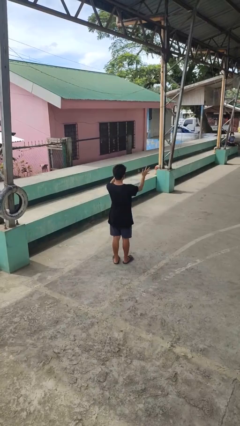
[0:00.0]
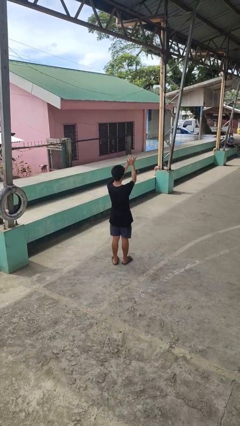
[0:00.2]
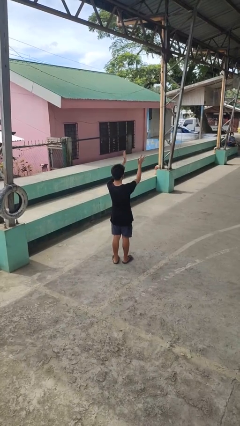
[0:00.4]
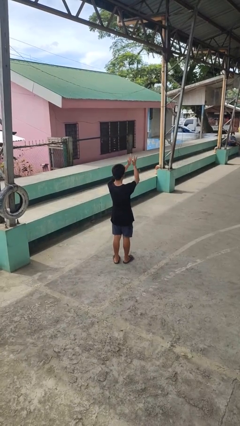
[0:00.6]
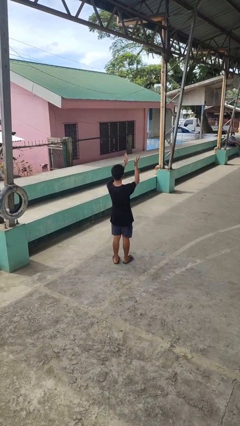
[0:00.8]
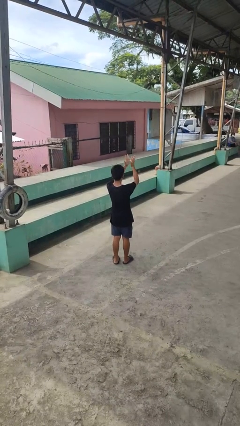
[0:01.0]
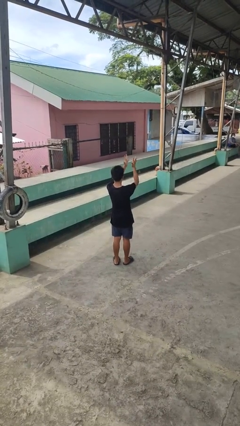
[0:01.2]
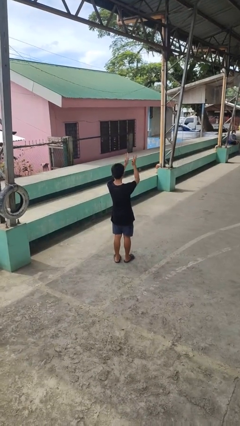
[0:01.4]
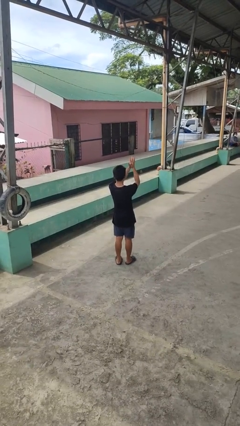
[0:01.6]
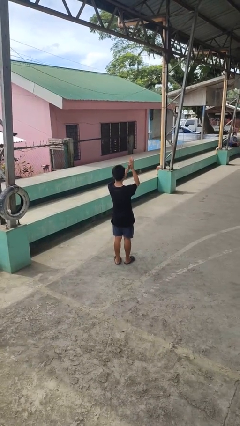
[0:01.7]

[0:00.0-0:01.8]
person claps hands

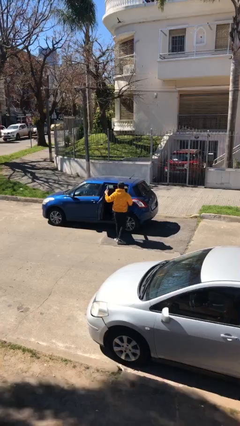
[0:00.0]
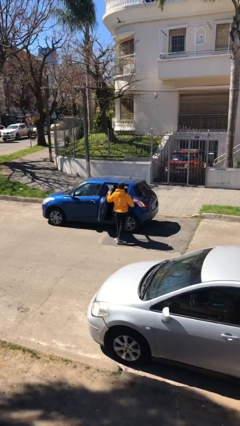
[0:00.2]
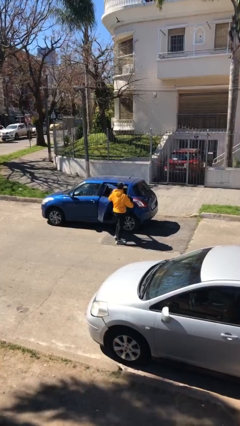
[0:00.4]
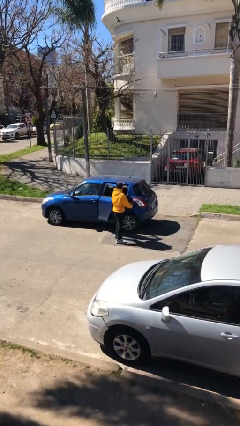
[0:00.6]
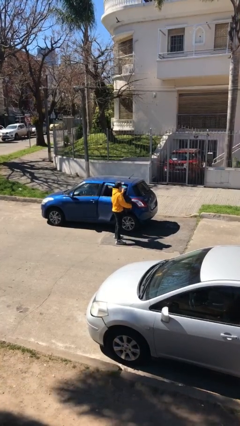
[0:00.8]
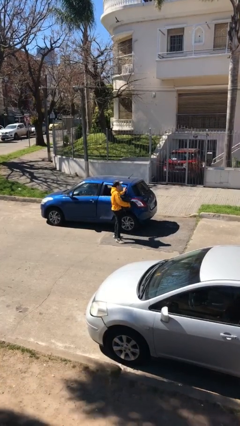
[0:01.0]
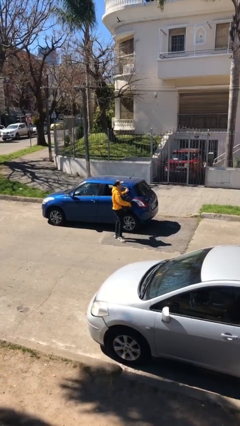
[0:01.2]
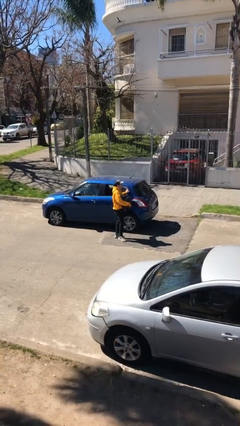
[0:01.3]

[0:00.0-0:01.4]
person closes car door

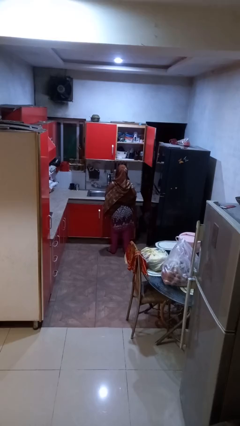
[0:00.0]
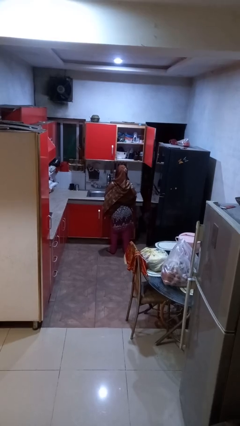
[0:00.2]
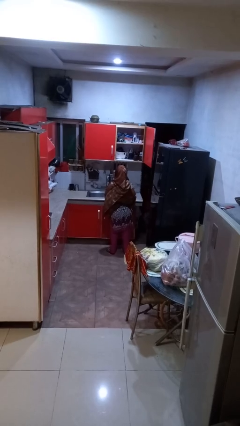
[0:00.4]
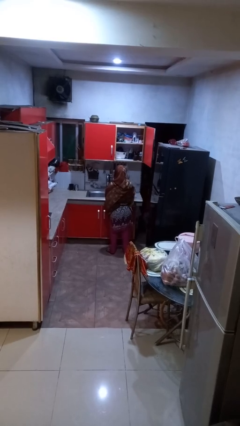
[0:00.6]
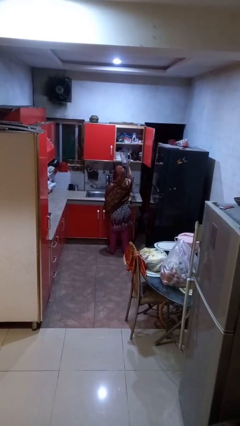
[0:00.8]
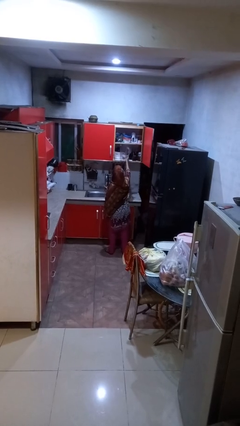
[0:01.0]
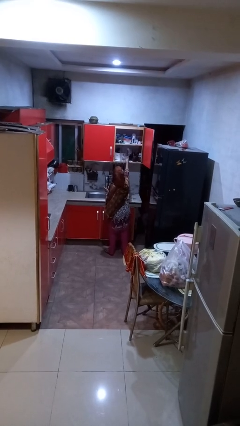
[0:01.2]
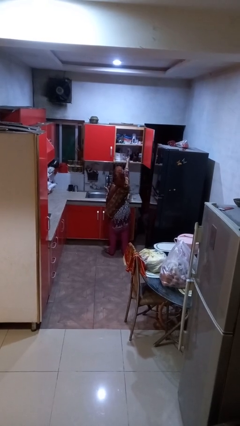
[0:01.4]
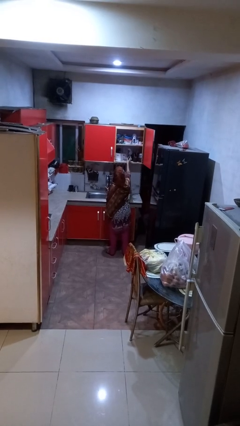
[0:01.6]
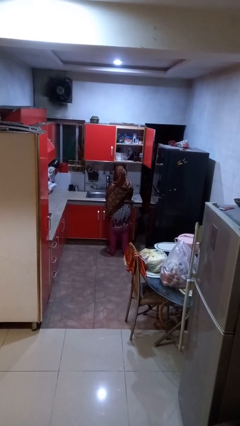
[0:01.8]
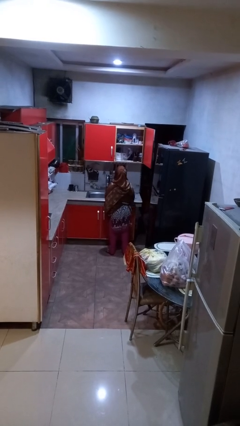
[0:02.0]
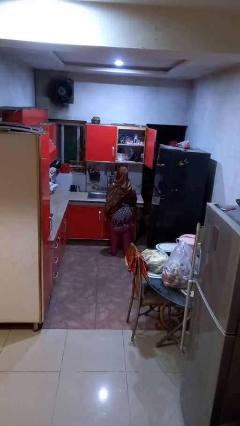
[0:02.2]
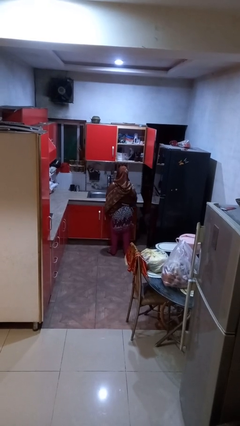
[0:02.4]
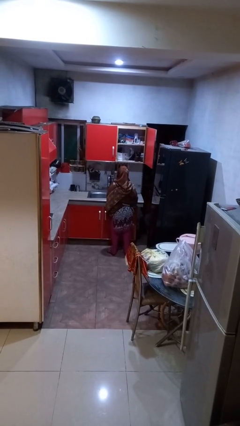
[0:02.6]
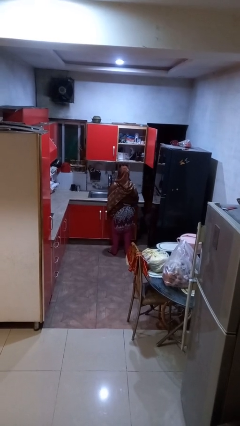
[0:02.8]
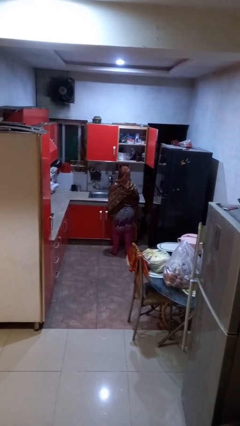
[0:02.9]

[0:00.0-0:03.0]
person puts object in cabinet

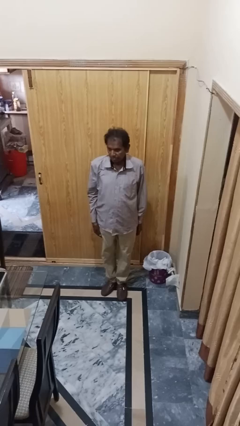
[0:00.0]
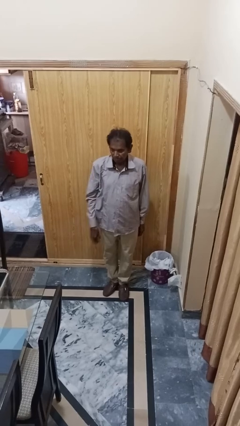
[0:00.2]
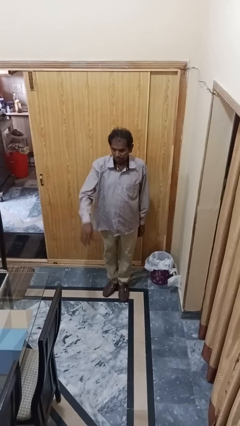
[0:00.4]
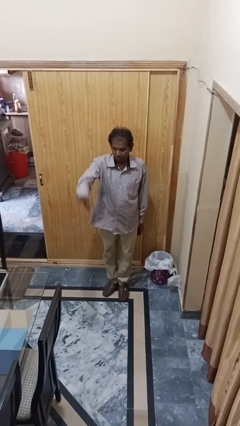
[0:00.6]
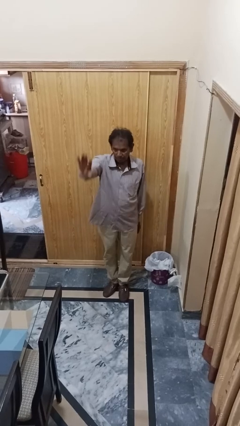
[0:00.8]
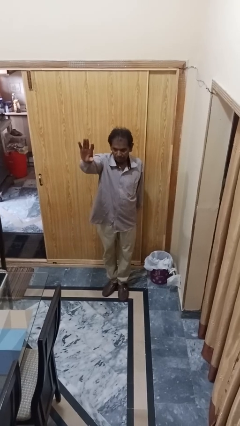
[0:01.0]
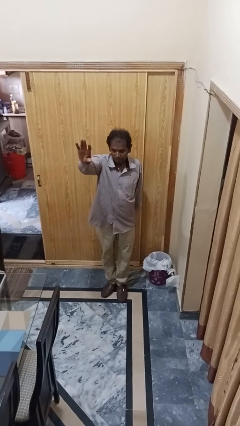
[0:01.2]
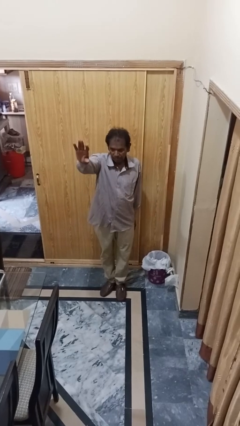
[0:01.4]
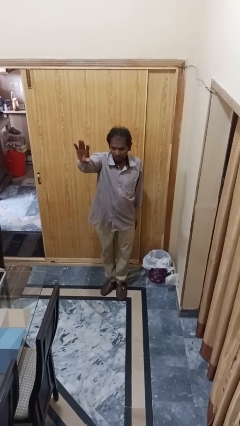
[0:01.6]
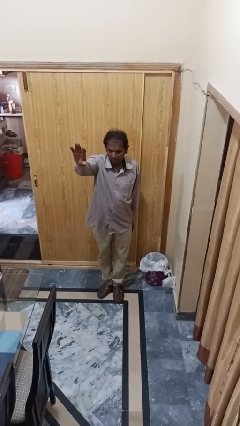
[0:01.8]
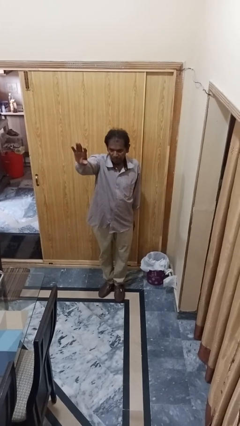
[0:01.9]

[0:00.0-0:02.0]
person gestures raise hand

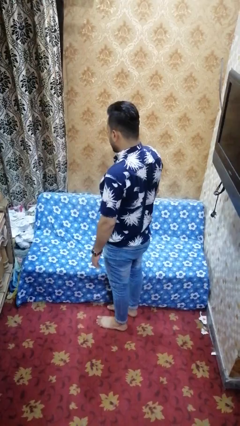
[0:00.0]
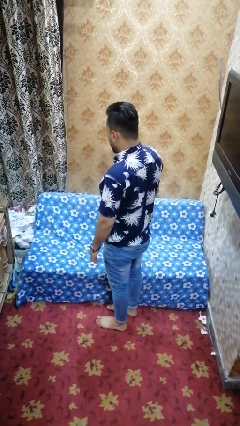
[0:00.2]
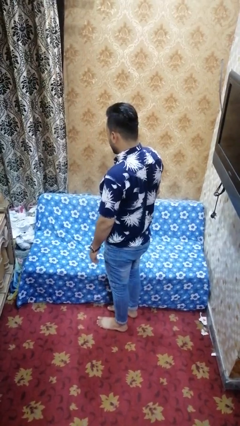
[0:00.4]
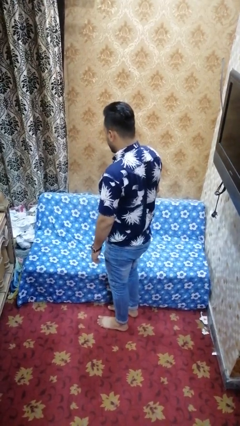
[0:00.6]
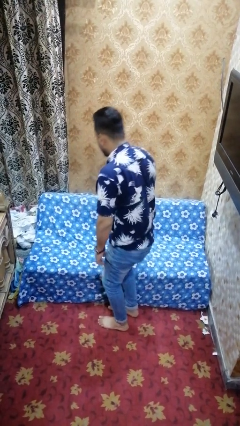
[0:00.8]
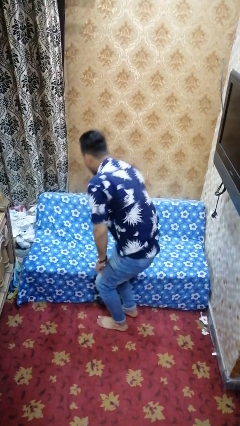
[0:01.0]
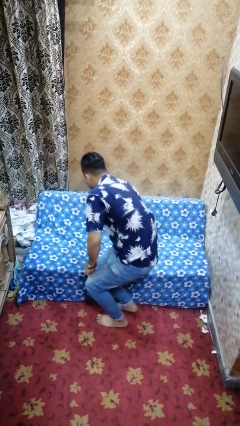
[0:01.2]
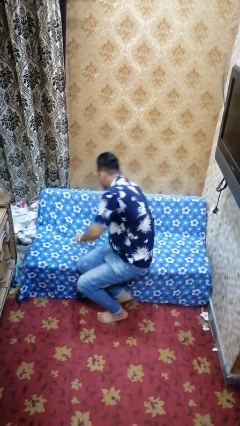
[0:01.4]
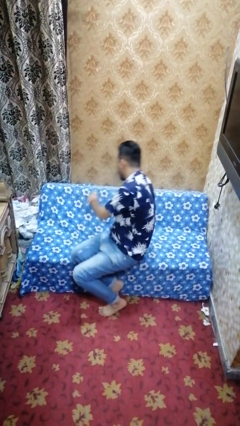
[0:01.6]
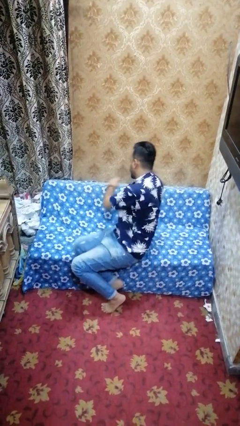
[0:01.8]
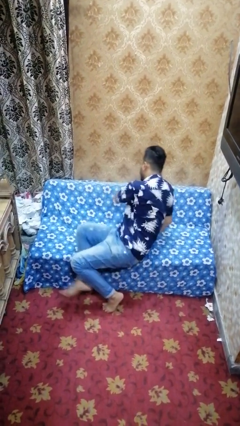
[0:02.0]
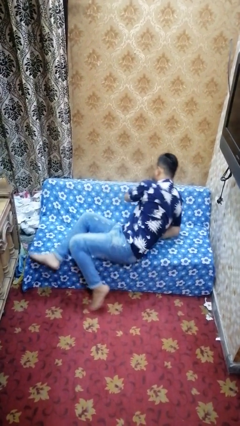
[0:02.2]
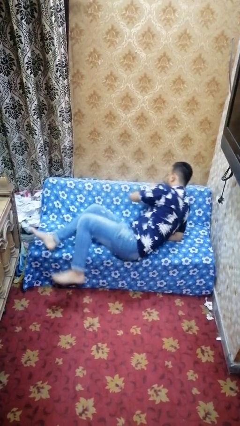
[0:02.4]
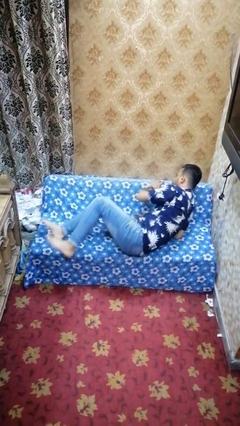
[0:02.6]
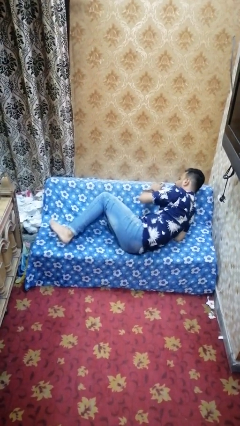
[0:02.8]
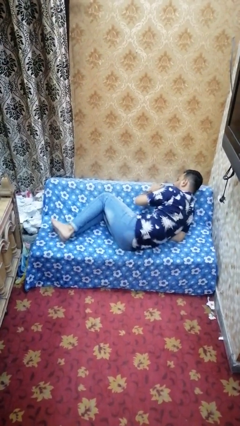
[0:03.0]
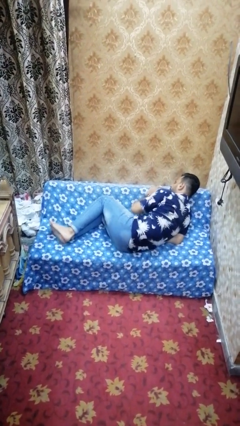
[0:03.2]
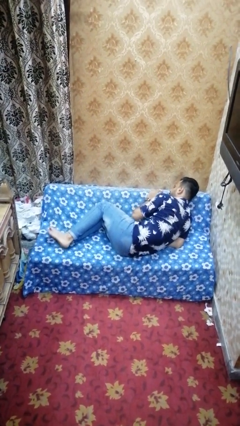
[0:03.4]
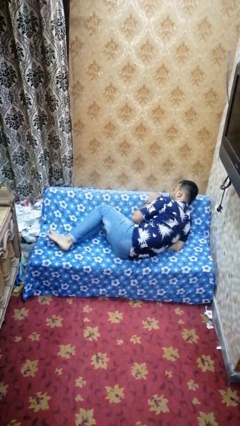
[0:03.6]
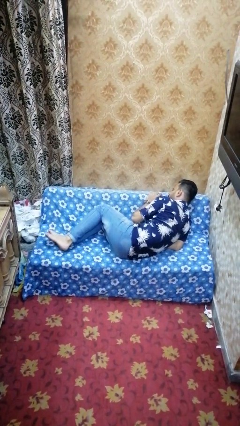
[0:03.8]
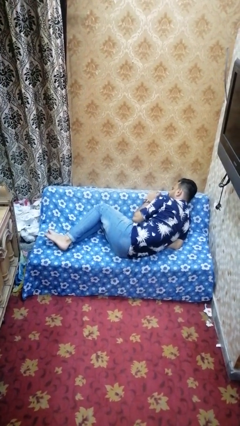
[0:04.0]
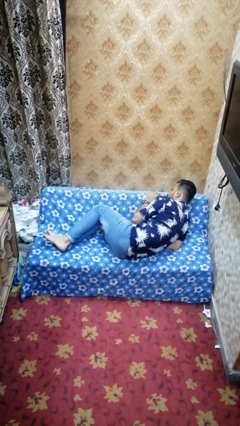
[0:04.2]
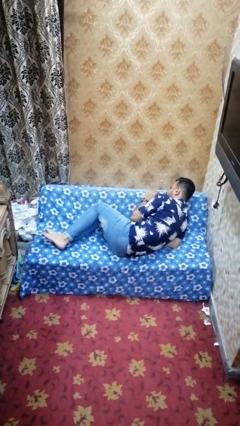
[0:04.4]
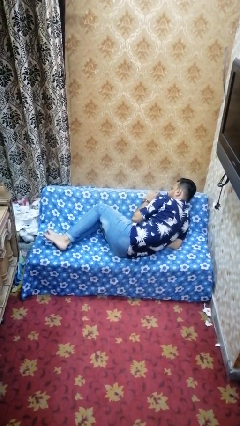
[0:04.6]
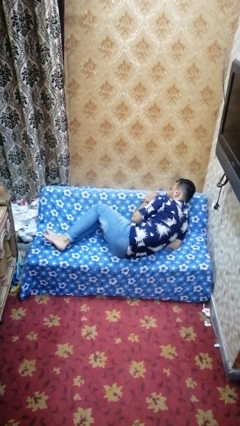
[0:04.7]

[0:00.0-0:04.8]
person lies down on couch

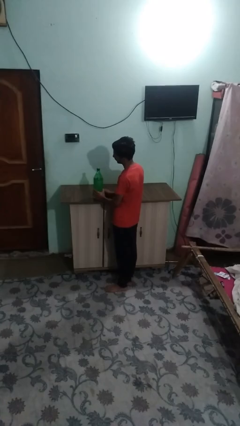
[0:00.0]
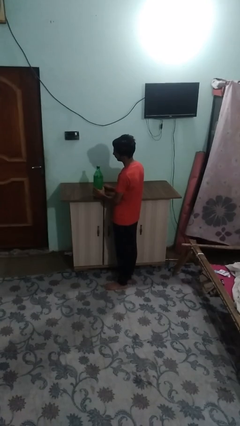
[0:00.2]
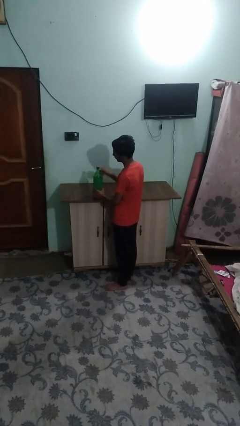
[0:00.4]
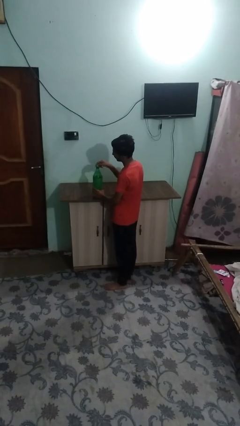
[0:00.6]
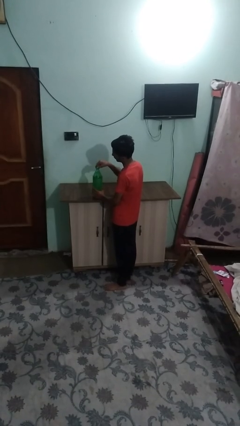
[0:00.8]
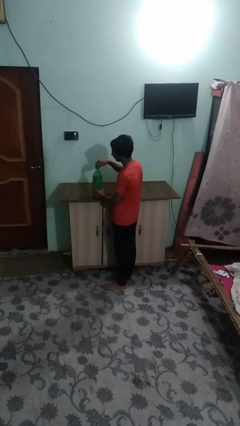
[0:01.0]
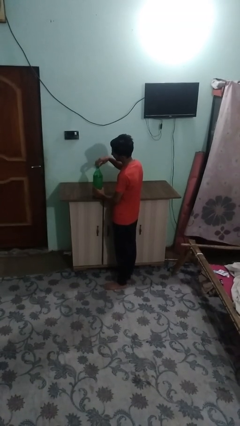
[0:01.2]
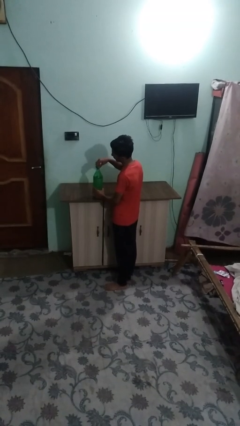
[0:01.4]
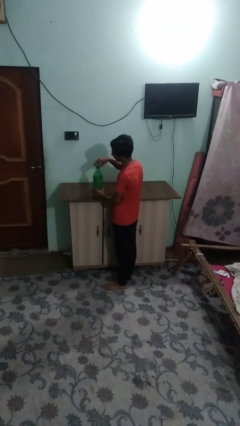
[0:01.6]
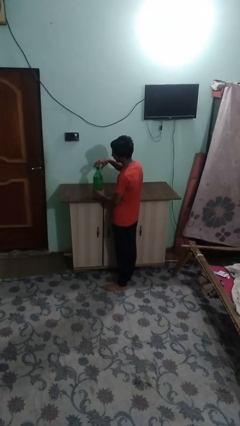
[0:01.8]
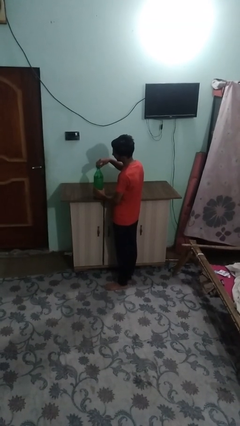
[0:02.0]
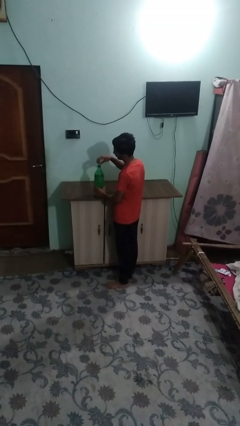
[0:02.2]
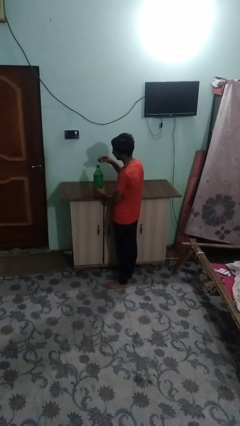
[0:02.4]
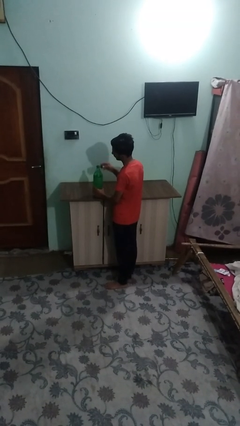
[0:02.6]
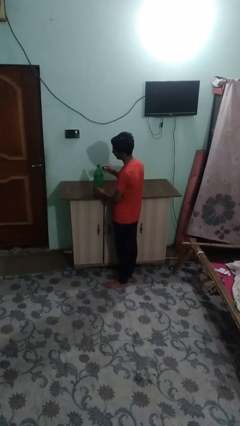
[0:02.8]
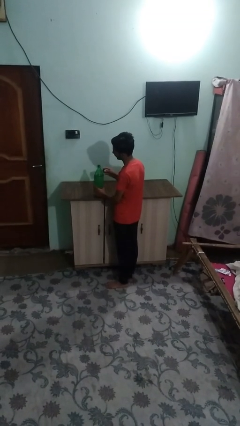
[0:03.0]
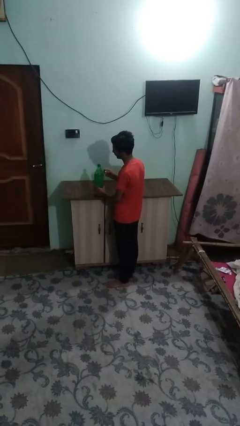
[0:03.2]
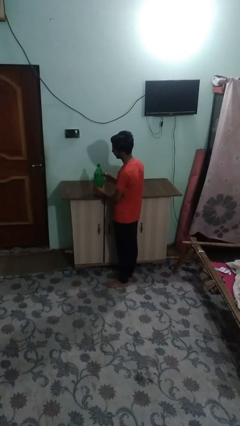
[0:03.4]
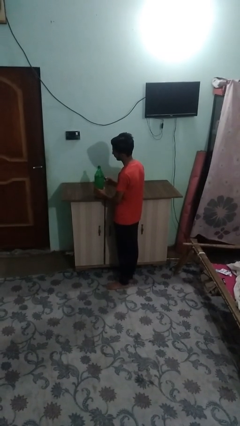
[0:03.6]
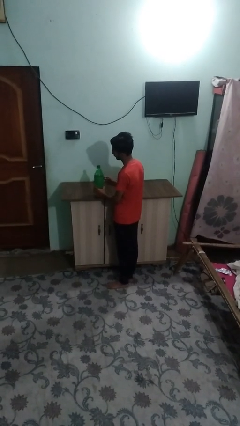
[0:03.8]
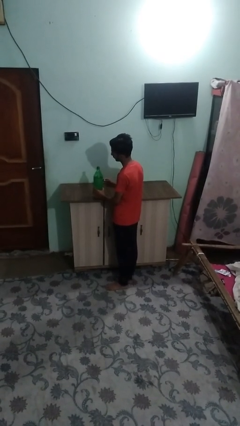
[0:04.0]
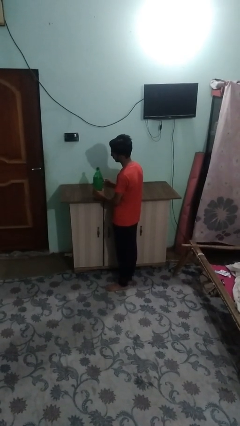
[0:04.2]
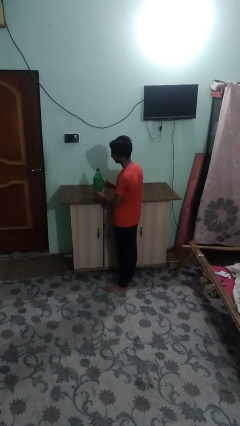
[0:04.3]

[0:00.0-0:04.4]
person unscrews lid from bottle
